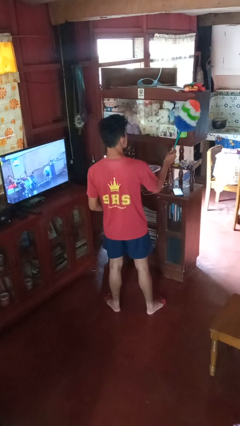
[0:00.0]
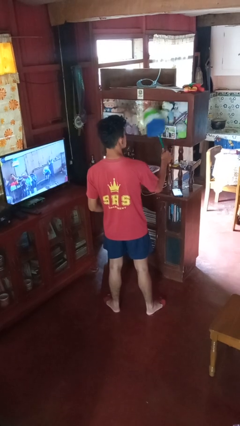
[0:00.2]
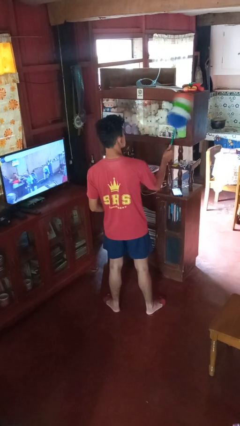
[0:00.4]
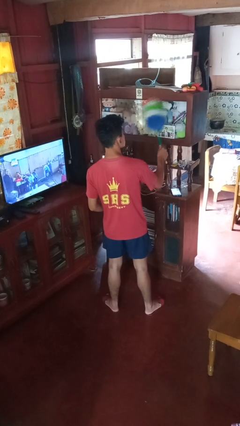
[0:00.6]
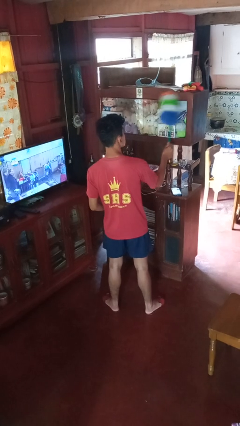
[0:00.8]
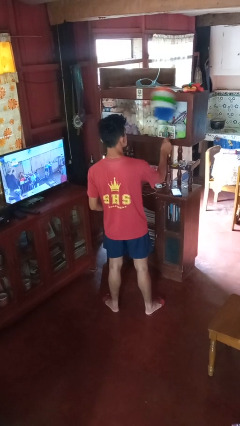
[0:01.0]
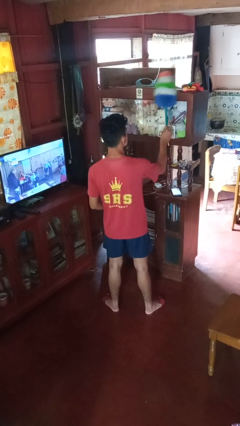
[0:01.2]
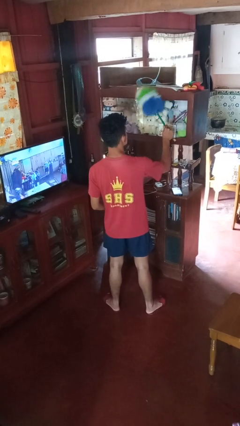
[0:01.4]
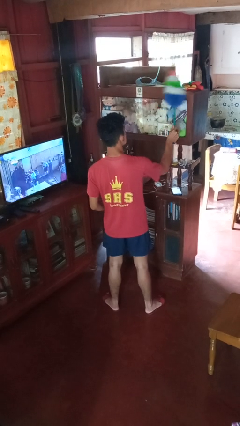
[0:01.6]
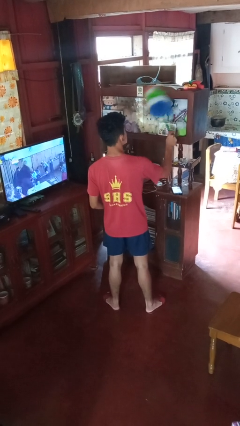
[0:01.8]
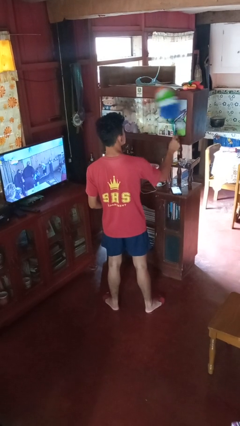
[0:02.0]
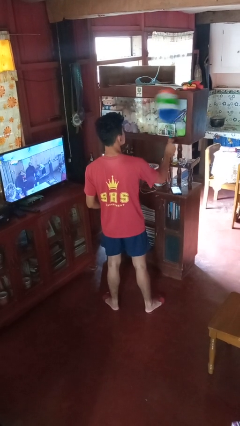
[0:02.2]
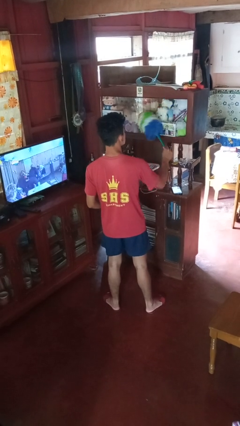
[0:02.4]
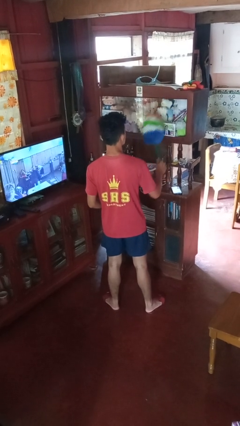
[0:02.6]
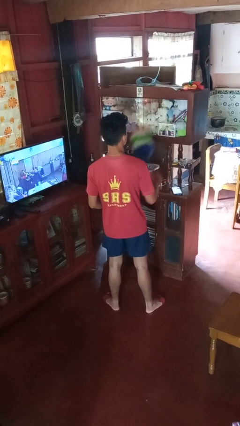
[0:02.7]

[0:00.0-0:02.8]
person dusts furniture

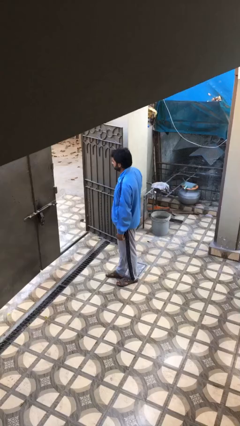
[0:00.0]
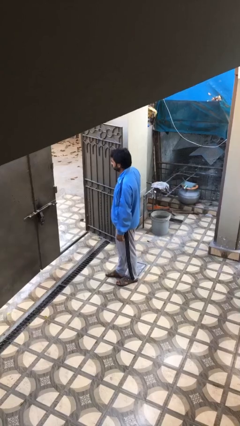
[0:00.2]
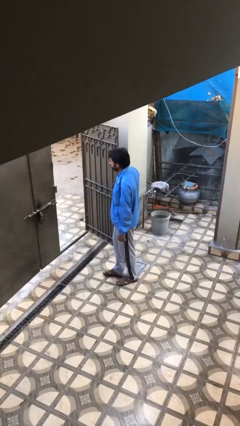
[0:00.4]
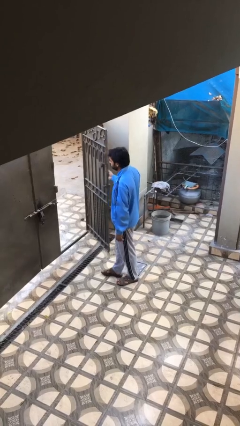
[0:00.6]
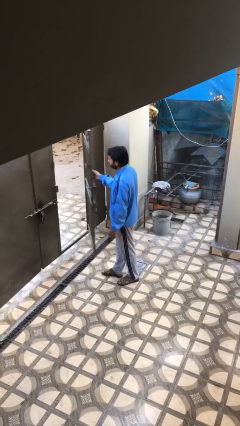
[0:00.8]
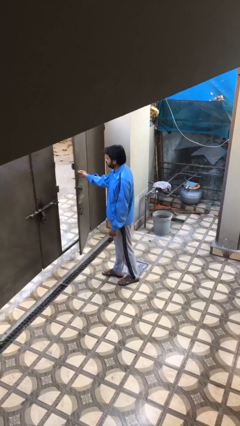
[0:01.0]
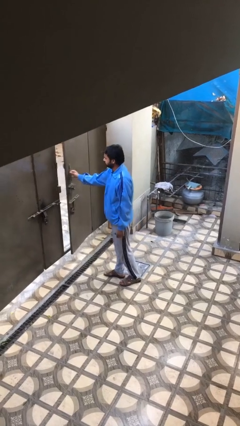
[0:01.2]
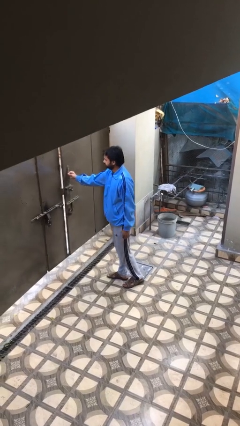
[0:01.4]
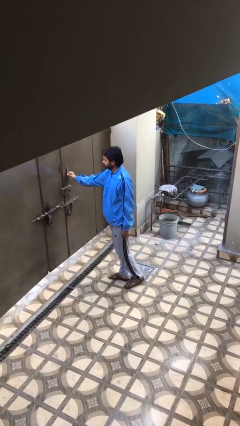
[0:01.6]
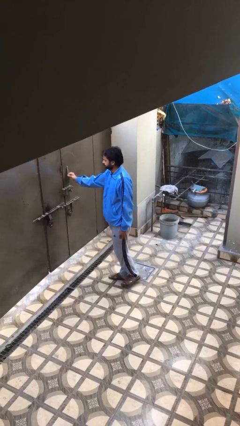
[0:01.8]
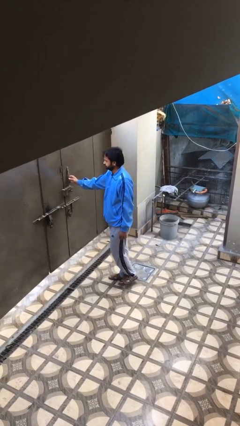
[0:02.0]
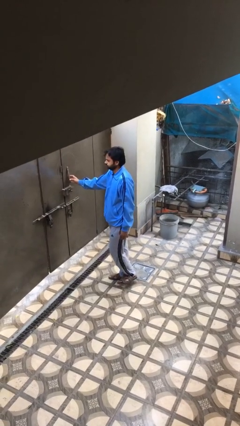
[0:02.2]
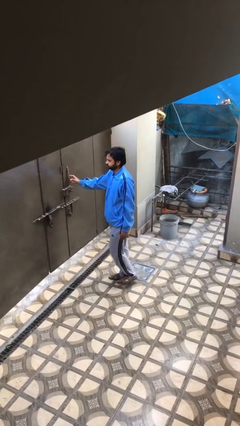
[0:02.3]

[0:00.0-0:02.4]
person closes facility door

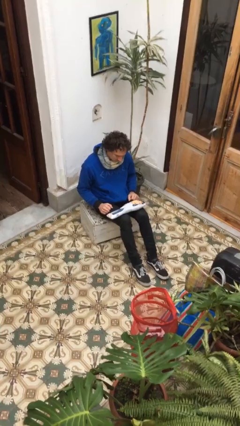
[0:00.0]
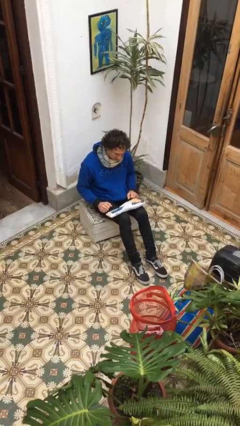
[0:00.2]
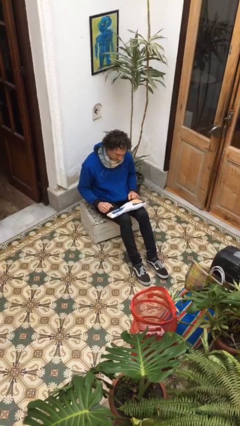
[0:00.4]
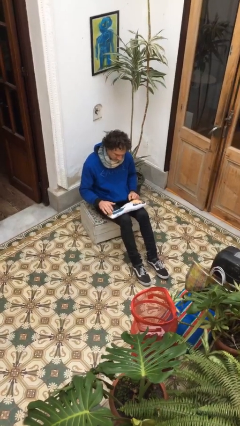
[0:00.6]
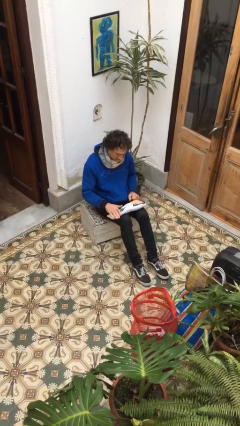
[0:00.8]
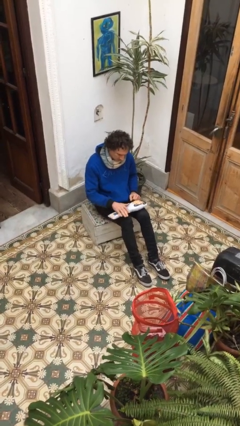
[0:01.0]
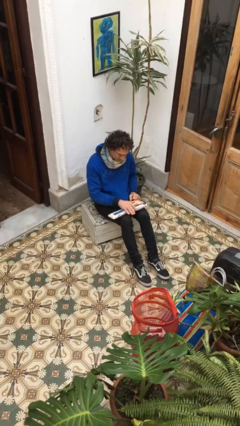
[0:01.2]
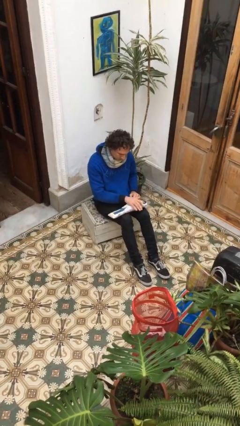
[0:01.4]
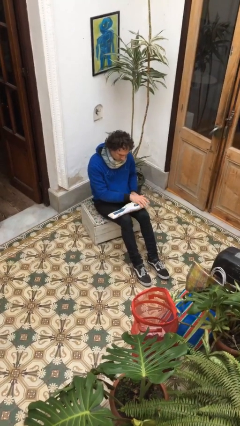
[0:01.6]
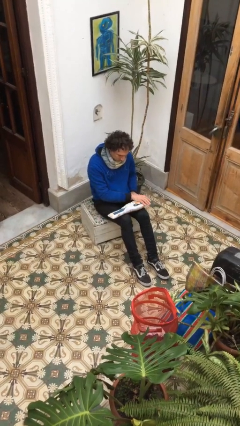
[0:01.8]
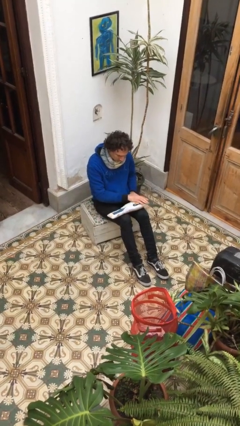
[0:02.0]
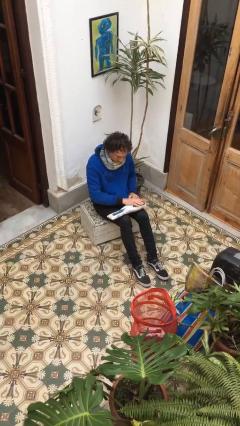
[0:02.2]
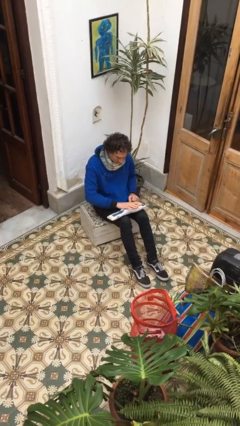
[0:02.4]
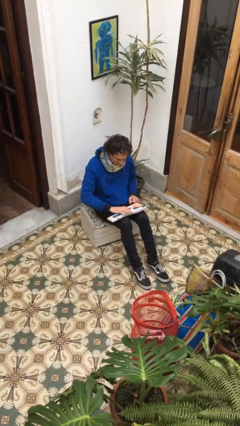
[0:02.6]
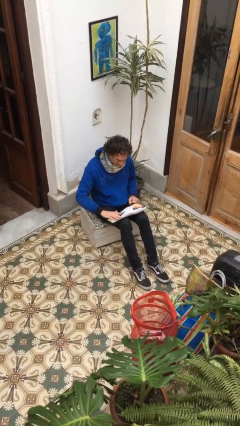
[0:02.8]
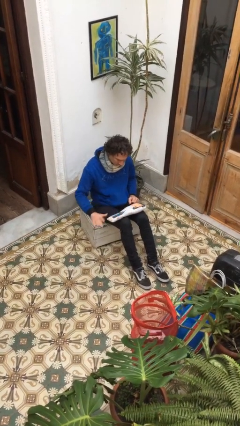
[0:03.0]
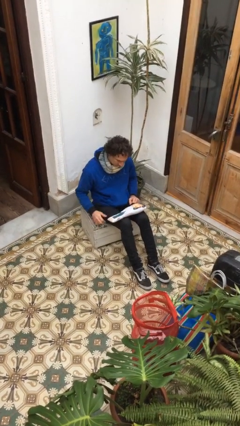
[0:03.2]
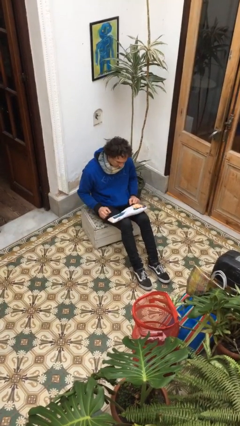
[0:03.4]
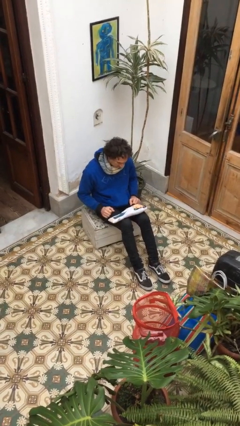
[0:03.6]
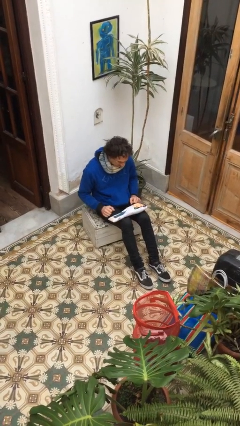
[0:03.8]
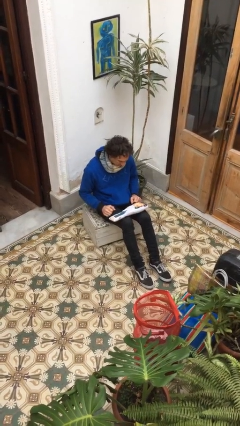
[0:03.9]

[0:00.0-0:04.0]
person waves hand over object

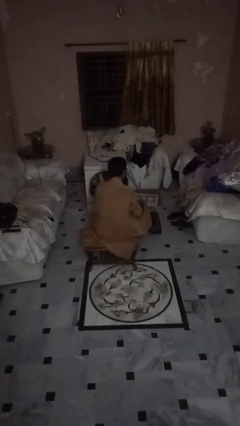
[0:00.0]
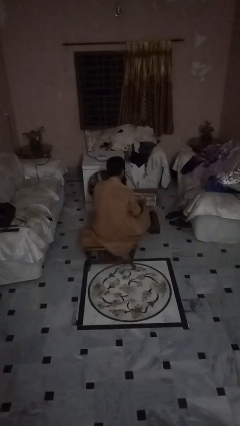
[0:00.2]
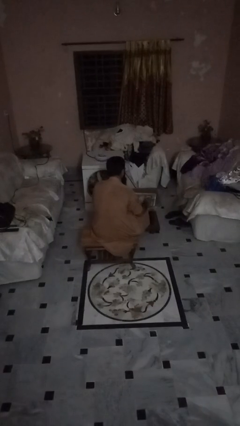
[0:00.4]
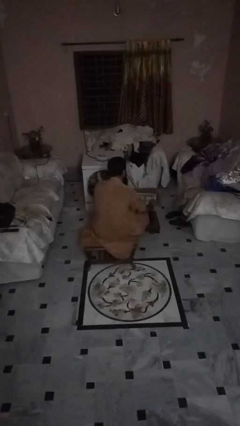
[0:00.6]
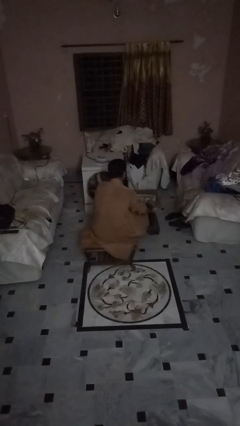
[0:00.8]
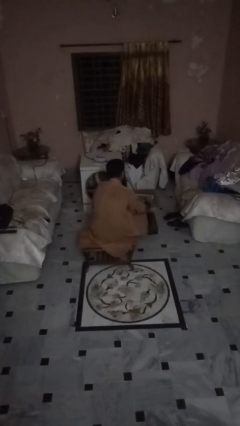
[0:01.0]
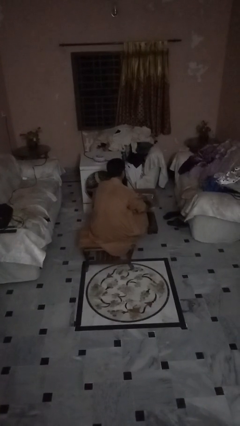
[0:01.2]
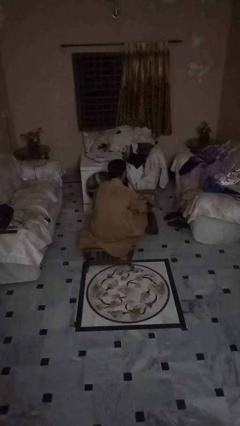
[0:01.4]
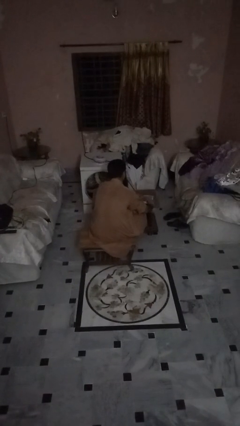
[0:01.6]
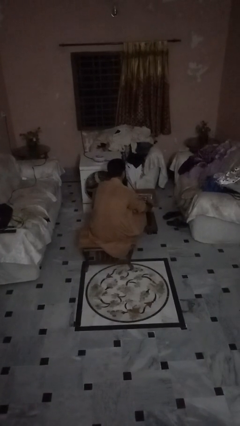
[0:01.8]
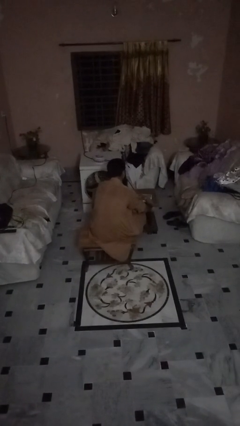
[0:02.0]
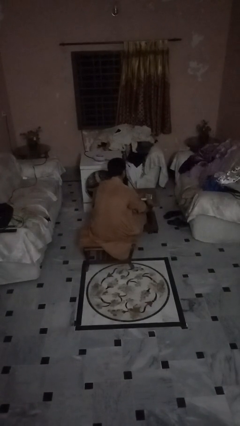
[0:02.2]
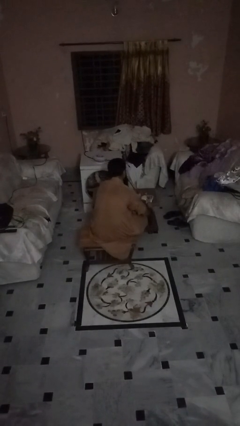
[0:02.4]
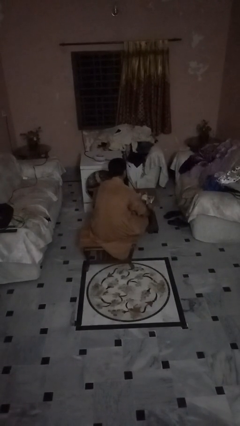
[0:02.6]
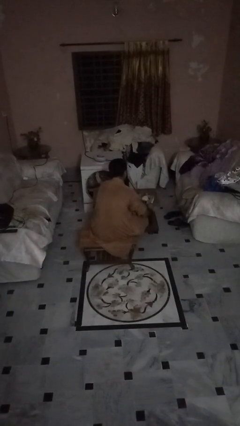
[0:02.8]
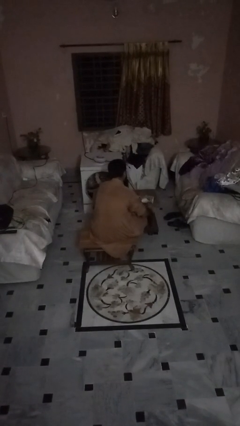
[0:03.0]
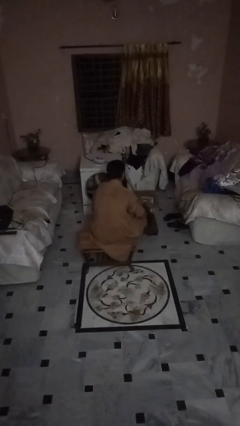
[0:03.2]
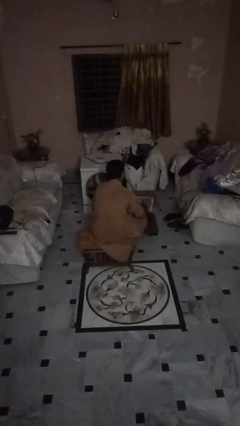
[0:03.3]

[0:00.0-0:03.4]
person tears paper

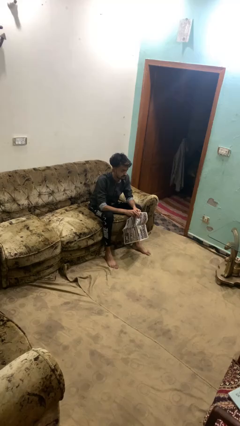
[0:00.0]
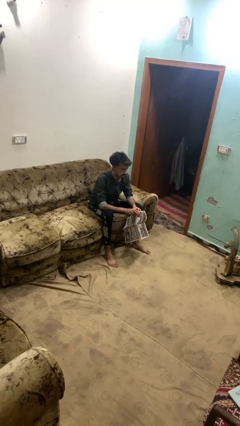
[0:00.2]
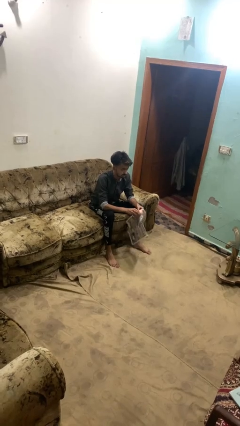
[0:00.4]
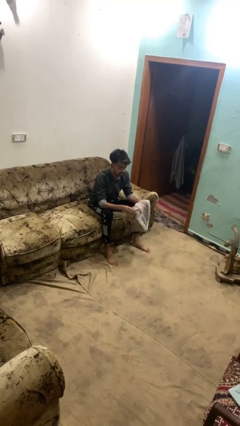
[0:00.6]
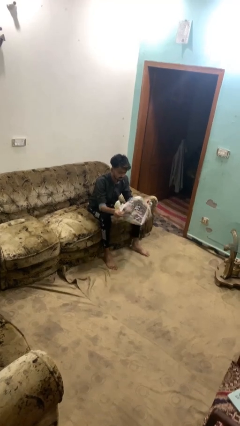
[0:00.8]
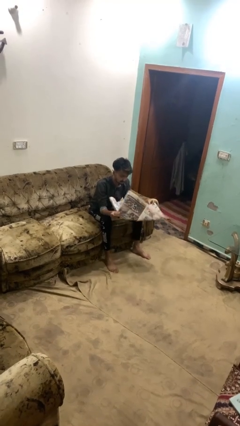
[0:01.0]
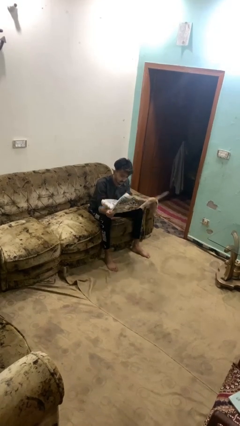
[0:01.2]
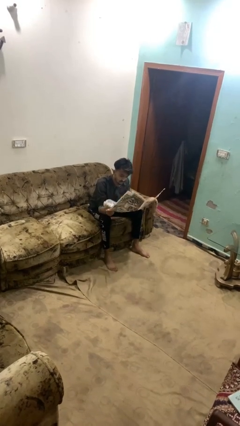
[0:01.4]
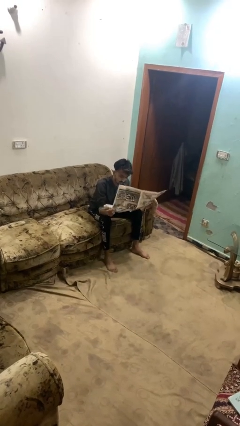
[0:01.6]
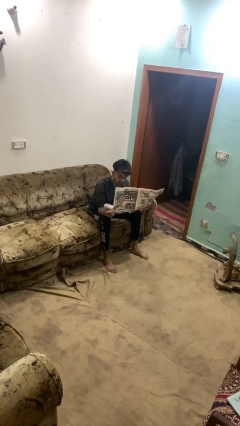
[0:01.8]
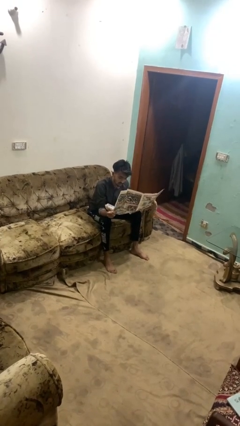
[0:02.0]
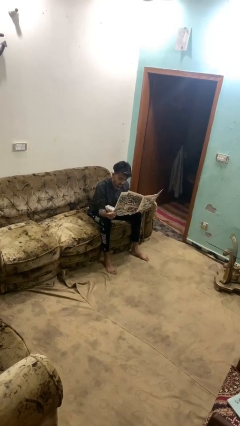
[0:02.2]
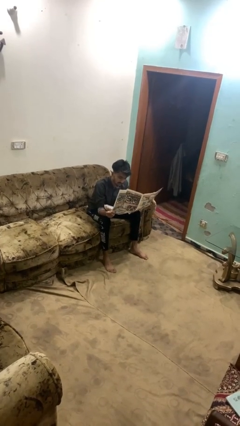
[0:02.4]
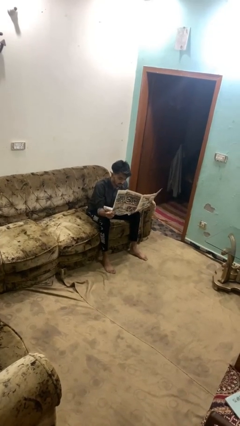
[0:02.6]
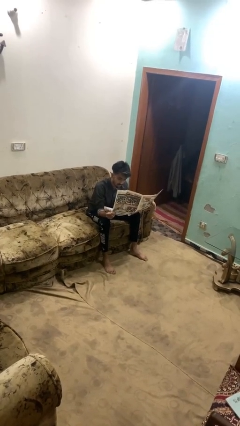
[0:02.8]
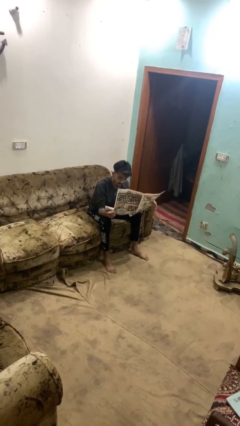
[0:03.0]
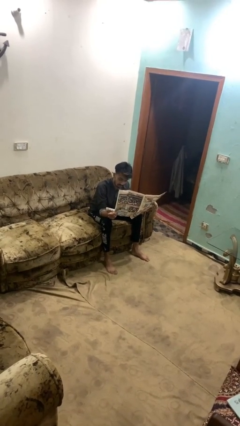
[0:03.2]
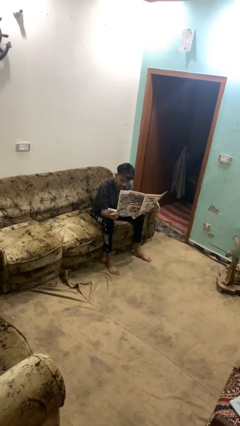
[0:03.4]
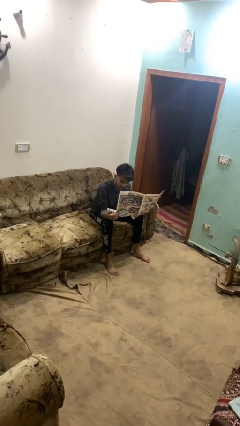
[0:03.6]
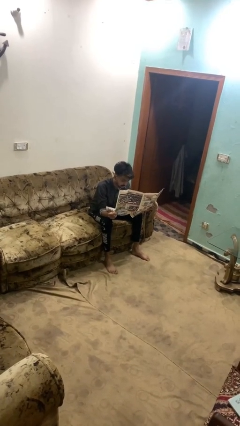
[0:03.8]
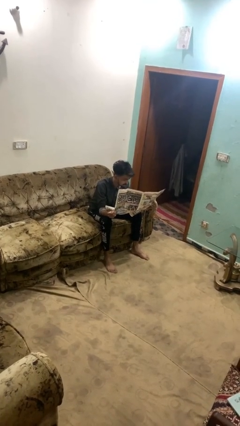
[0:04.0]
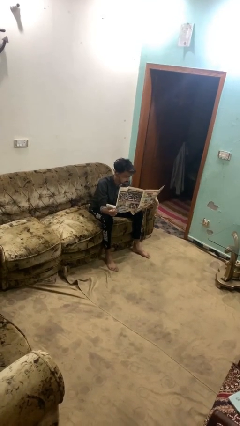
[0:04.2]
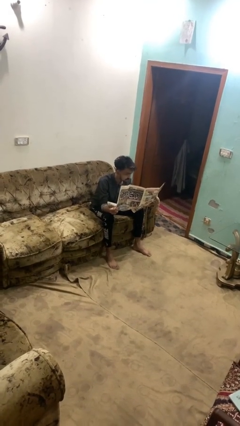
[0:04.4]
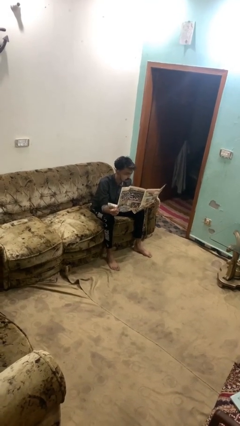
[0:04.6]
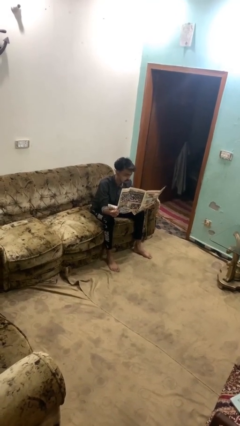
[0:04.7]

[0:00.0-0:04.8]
person reads newspaper

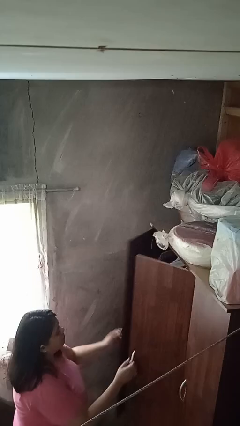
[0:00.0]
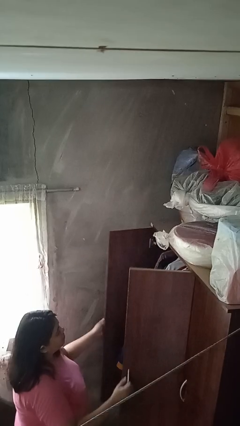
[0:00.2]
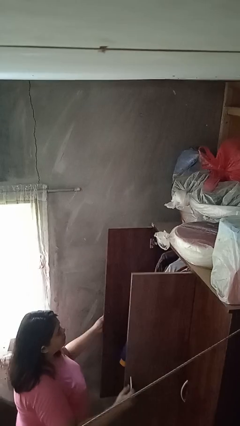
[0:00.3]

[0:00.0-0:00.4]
person opens closet door
